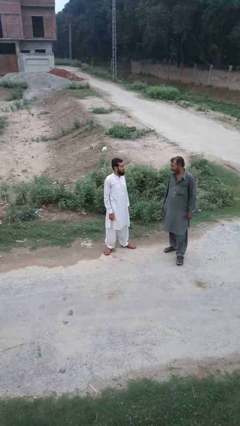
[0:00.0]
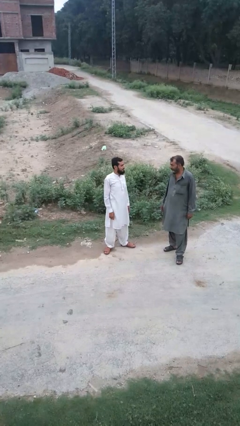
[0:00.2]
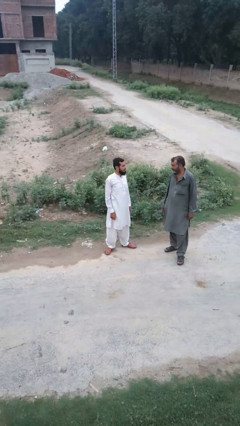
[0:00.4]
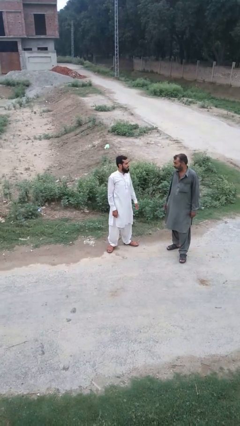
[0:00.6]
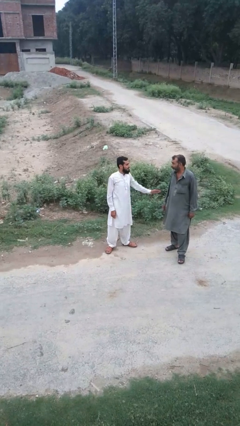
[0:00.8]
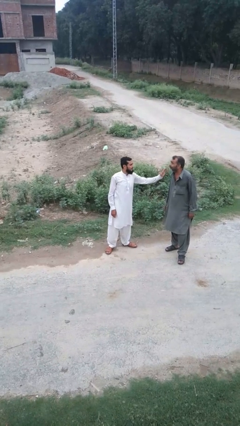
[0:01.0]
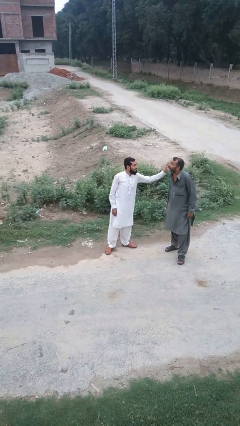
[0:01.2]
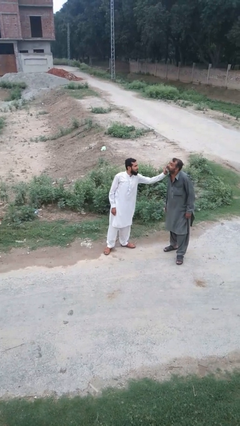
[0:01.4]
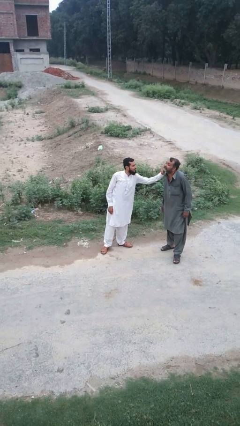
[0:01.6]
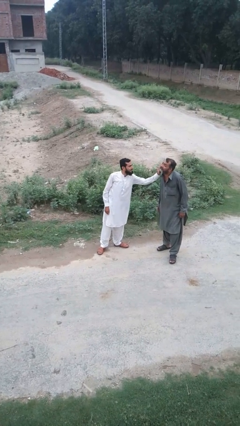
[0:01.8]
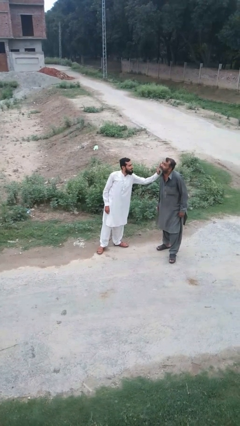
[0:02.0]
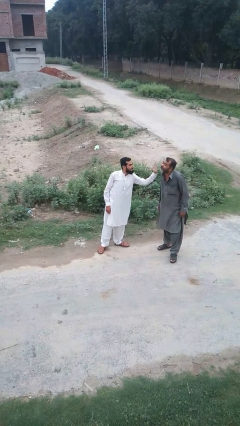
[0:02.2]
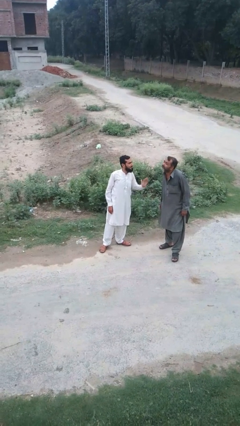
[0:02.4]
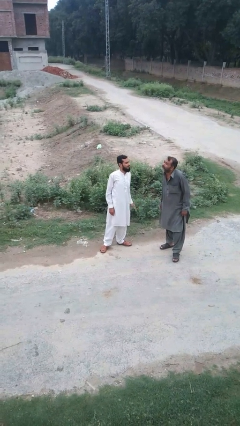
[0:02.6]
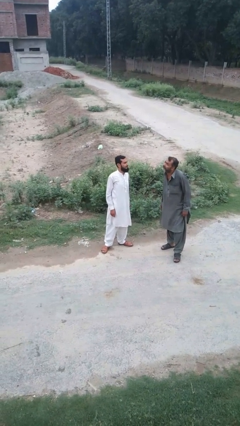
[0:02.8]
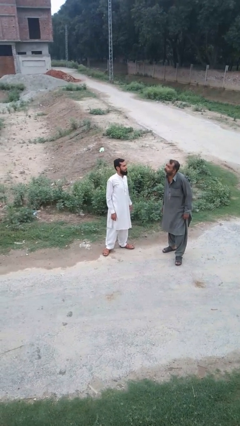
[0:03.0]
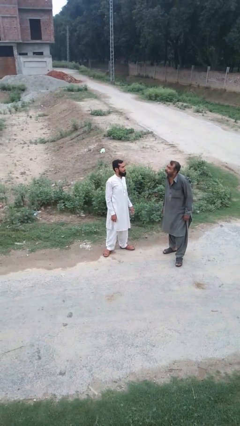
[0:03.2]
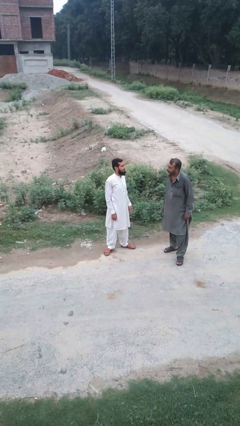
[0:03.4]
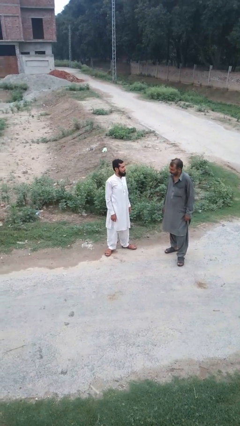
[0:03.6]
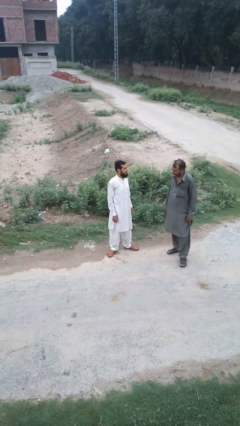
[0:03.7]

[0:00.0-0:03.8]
person touches face of person

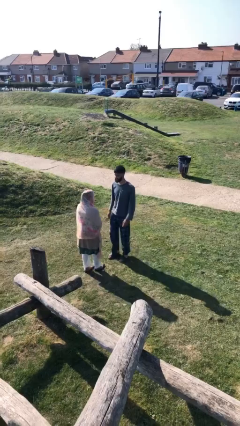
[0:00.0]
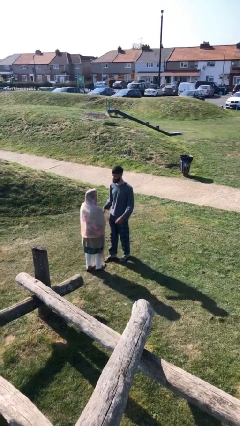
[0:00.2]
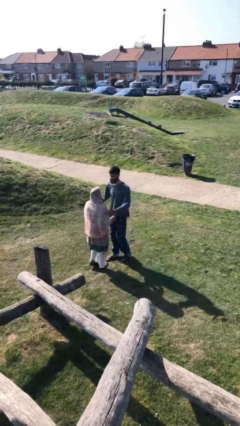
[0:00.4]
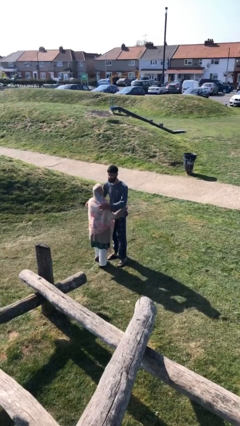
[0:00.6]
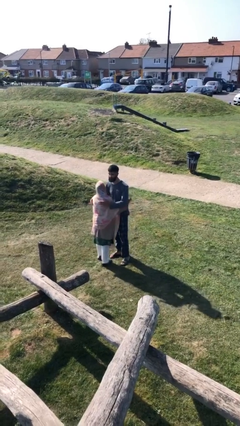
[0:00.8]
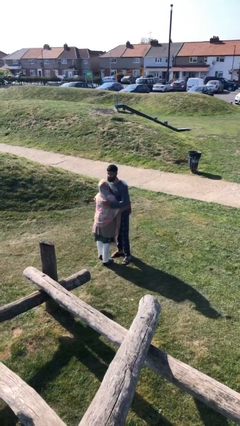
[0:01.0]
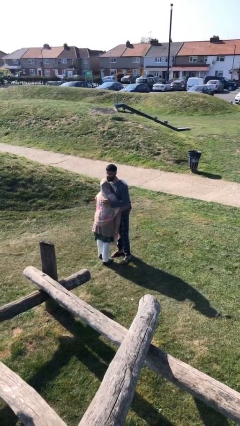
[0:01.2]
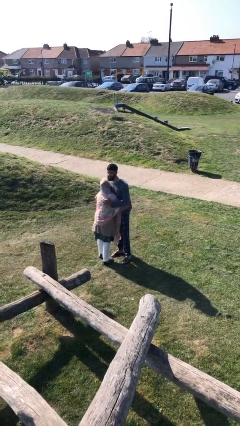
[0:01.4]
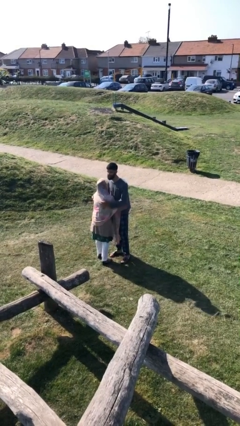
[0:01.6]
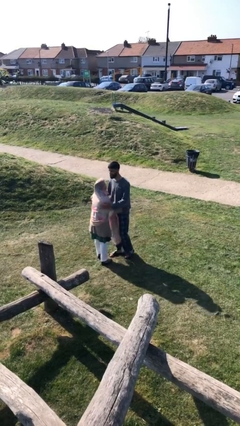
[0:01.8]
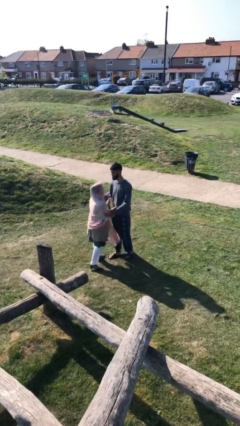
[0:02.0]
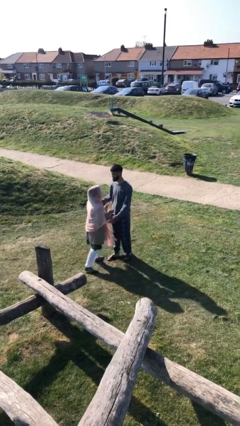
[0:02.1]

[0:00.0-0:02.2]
person embraces person

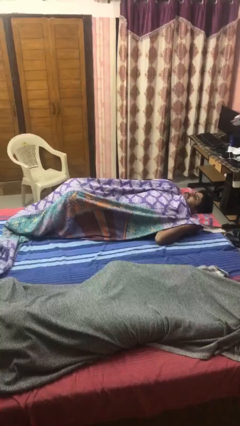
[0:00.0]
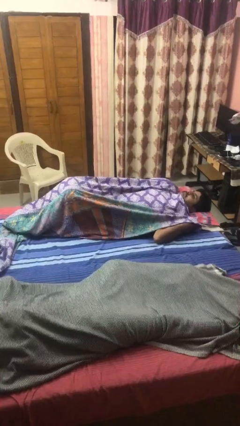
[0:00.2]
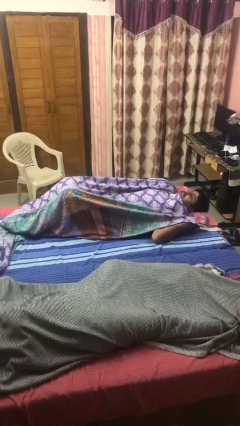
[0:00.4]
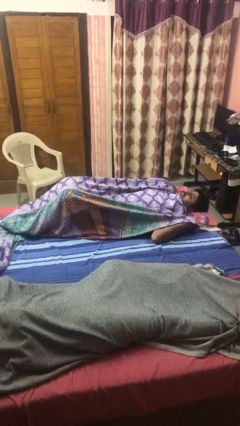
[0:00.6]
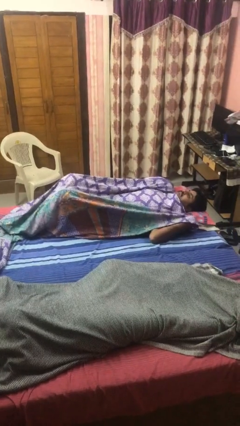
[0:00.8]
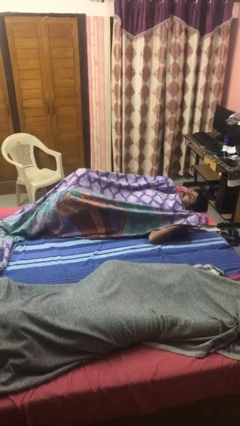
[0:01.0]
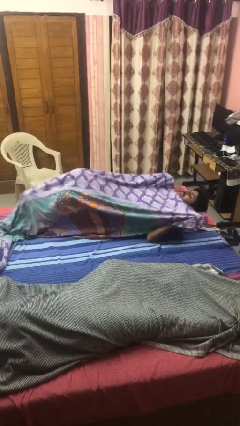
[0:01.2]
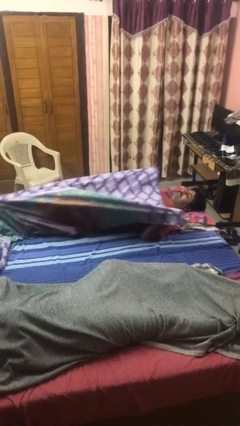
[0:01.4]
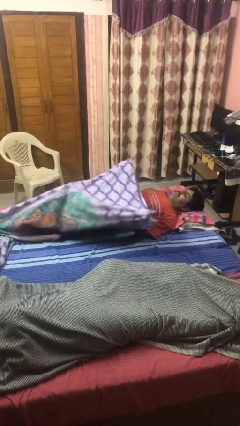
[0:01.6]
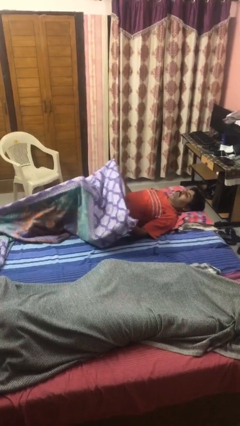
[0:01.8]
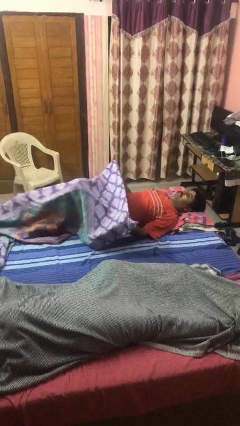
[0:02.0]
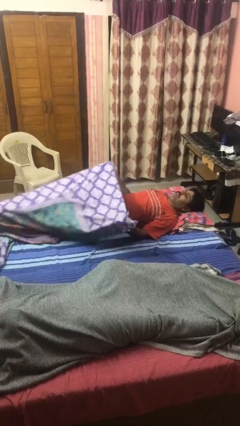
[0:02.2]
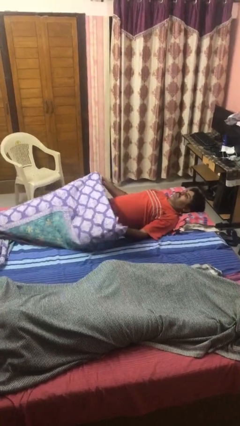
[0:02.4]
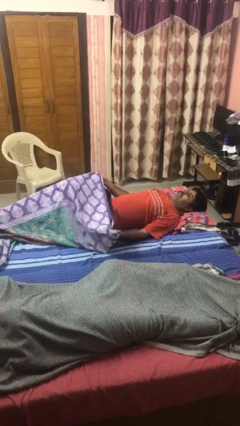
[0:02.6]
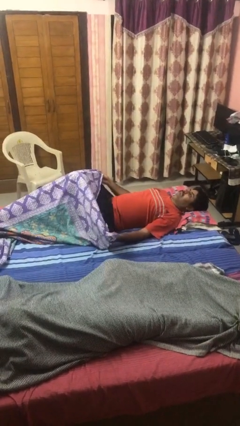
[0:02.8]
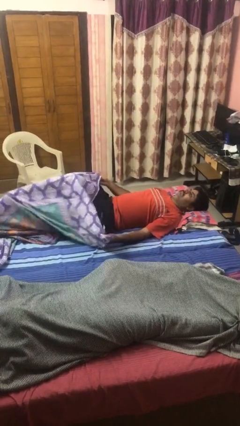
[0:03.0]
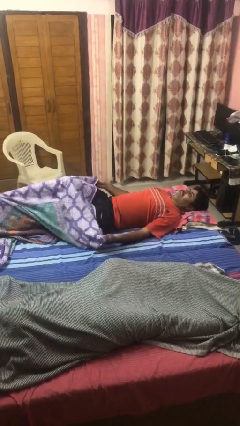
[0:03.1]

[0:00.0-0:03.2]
person uncovers with bedsheets

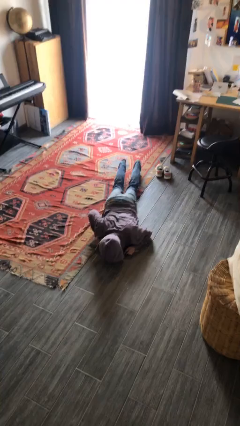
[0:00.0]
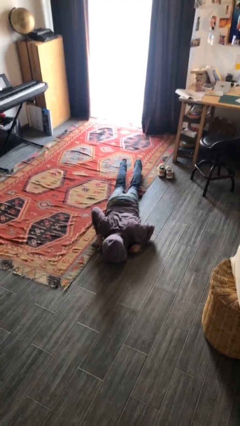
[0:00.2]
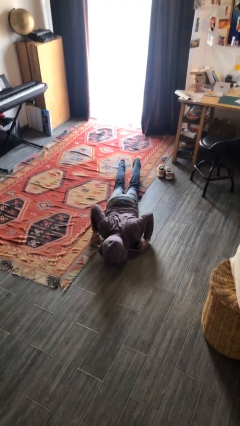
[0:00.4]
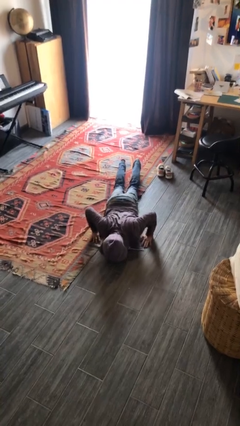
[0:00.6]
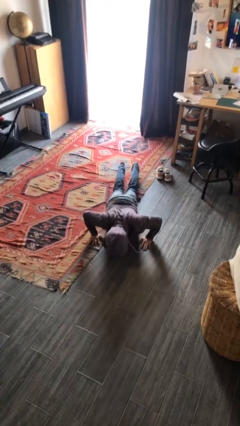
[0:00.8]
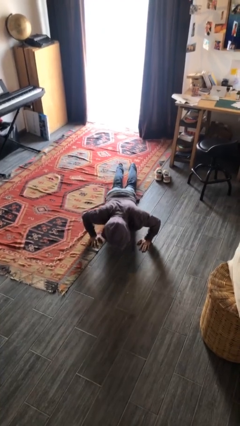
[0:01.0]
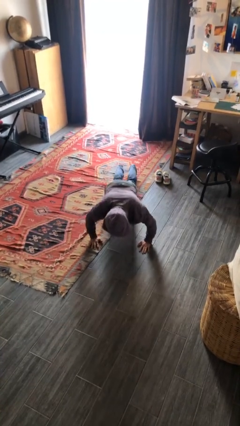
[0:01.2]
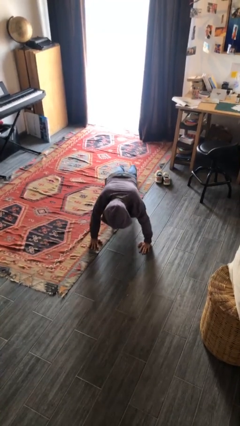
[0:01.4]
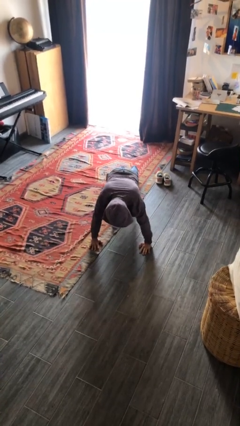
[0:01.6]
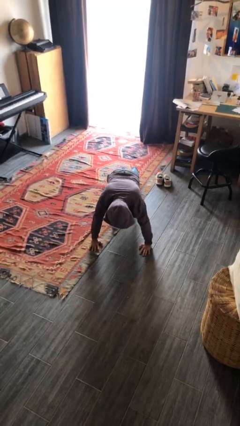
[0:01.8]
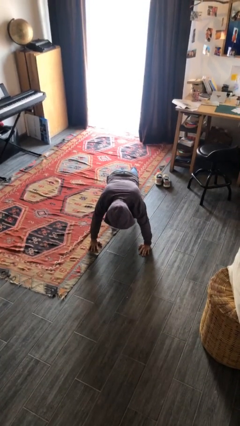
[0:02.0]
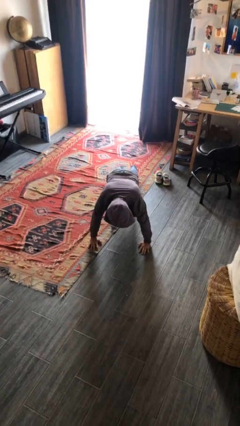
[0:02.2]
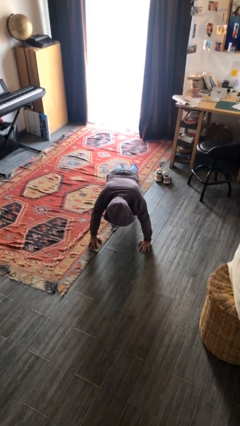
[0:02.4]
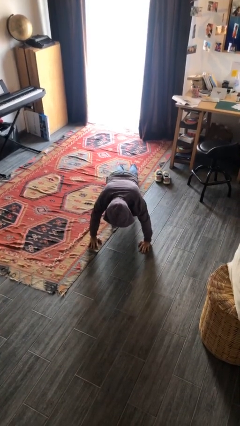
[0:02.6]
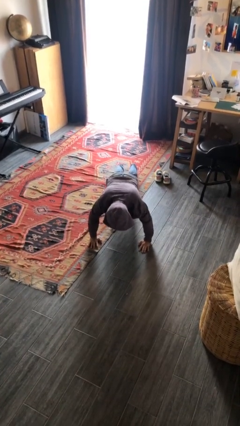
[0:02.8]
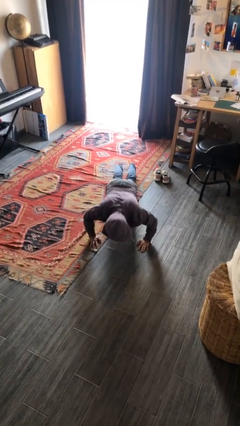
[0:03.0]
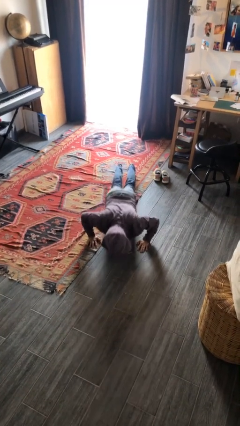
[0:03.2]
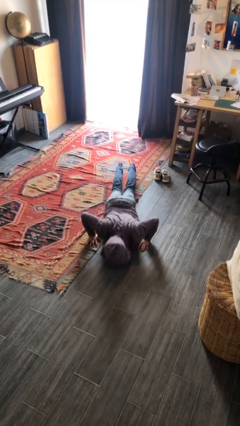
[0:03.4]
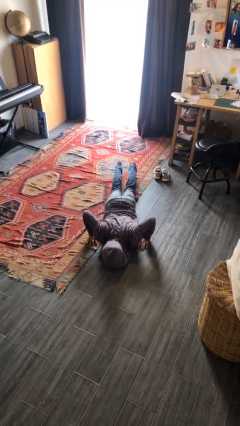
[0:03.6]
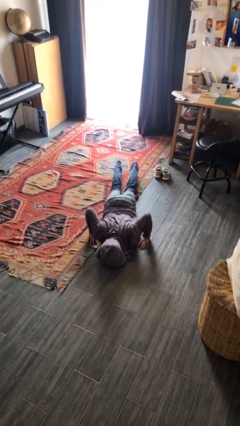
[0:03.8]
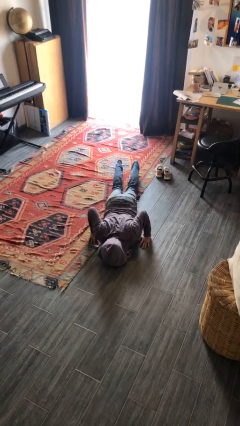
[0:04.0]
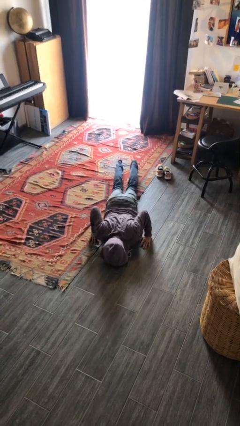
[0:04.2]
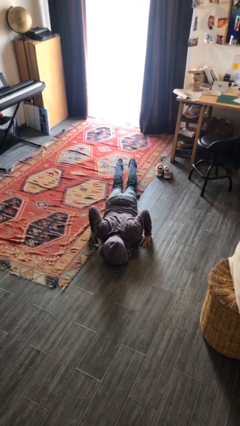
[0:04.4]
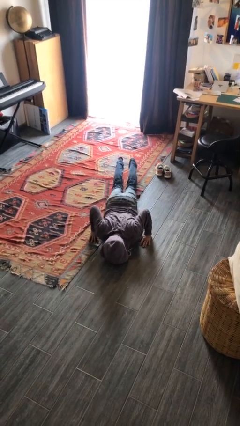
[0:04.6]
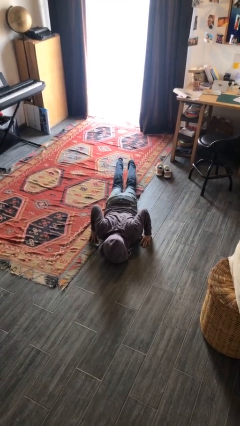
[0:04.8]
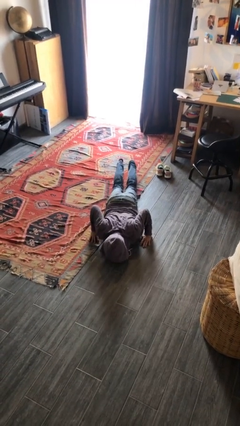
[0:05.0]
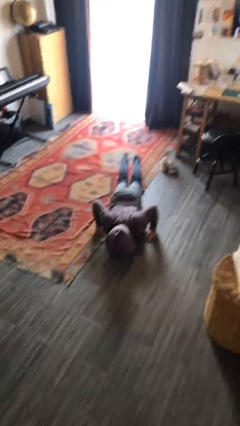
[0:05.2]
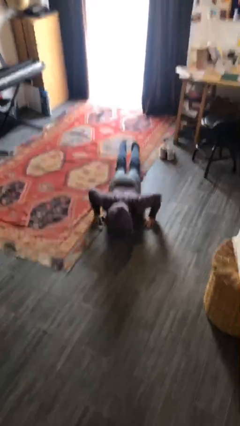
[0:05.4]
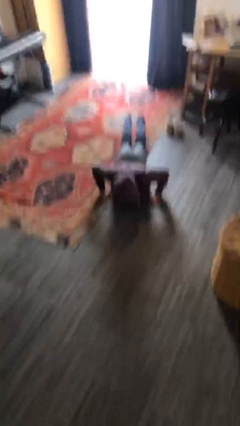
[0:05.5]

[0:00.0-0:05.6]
person exercises with pushup

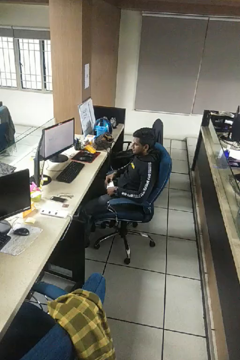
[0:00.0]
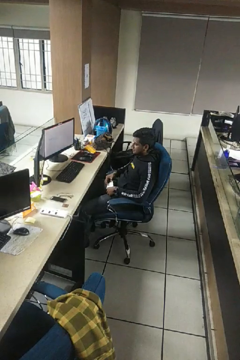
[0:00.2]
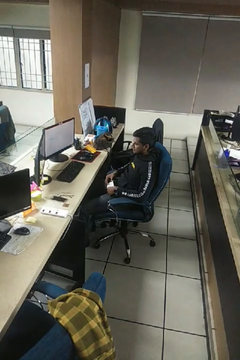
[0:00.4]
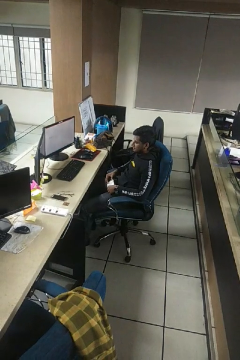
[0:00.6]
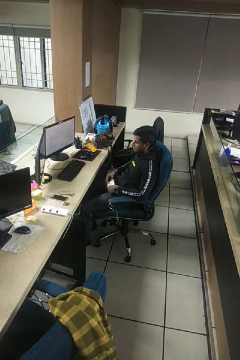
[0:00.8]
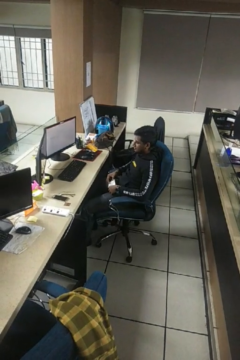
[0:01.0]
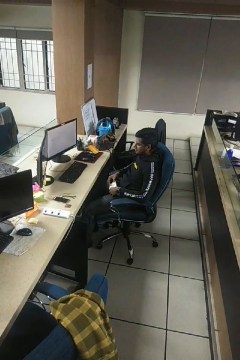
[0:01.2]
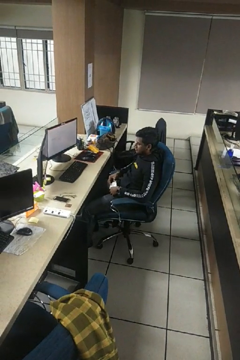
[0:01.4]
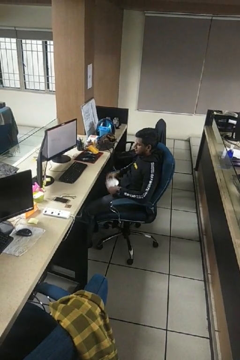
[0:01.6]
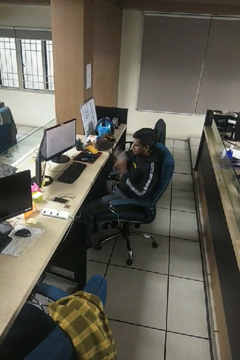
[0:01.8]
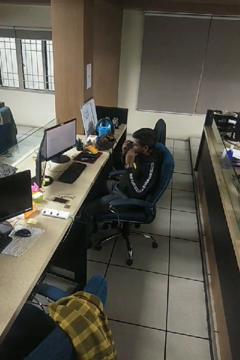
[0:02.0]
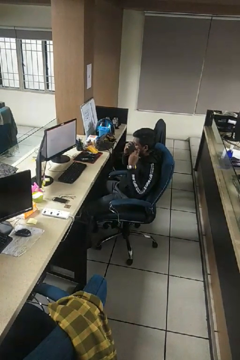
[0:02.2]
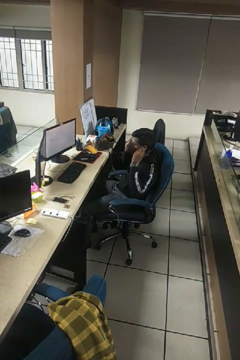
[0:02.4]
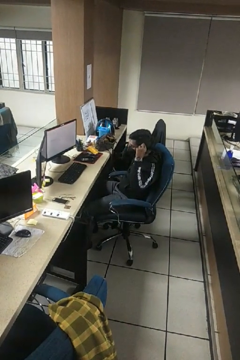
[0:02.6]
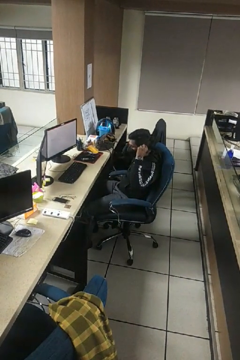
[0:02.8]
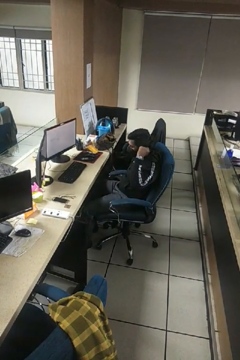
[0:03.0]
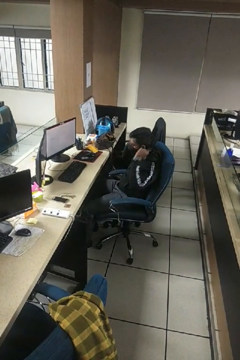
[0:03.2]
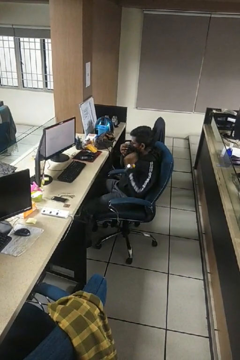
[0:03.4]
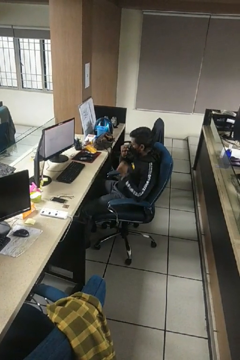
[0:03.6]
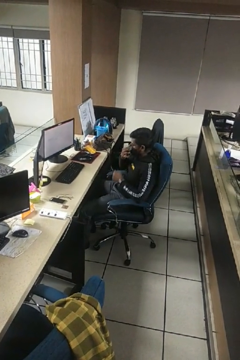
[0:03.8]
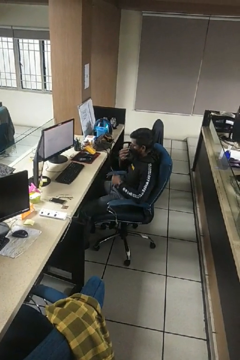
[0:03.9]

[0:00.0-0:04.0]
person puts on facemask
